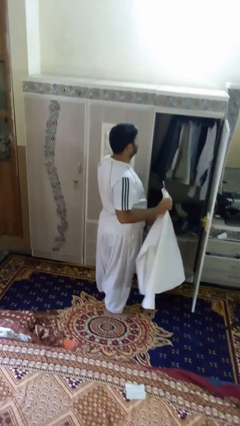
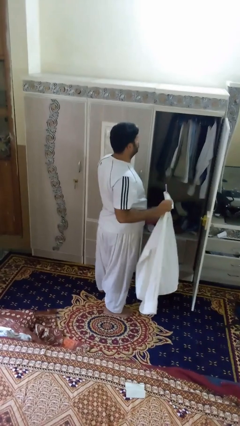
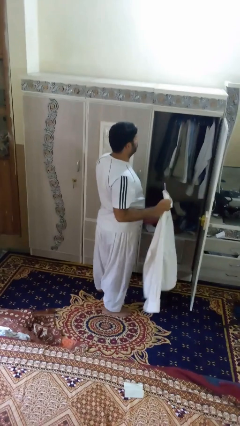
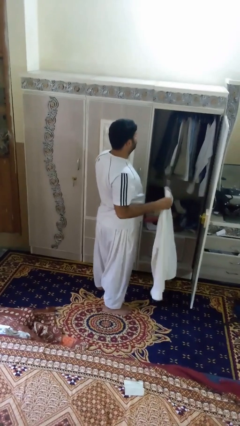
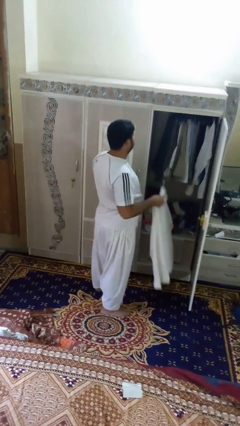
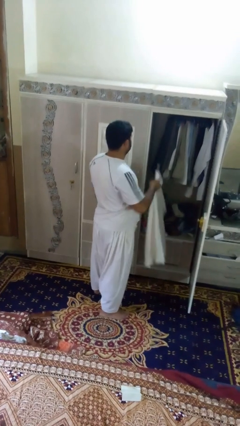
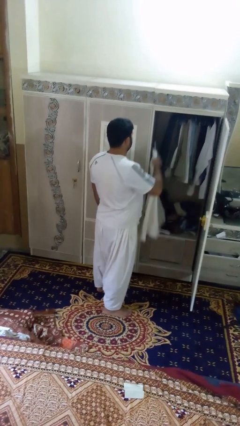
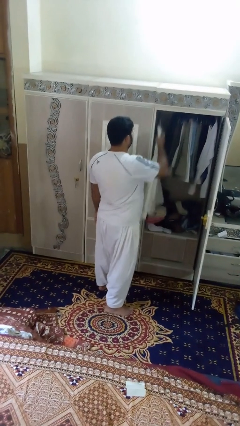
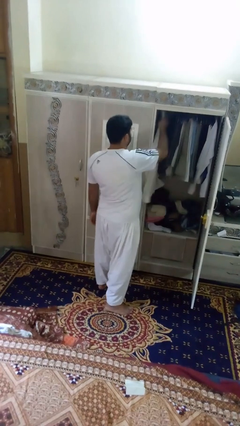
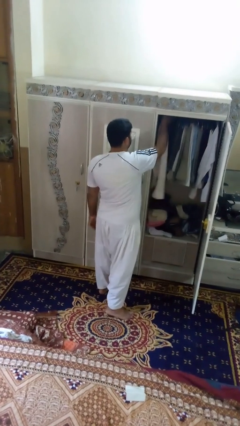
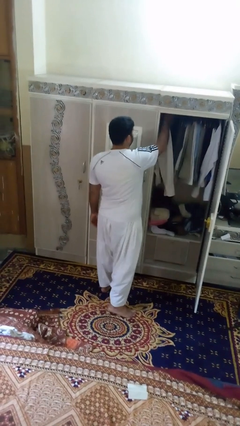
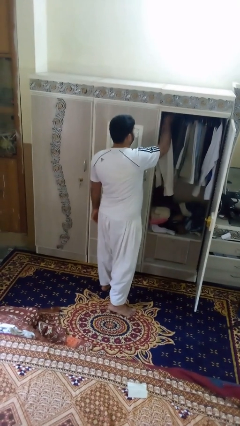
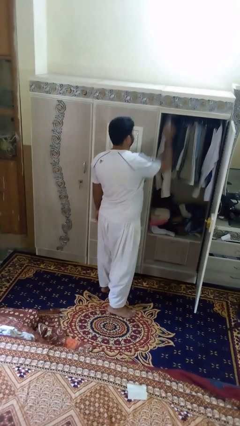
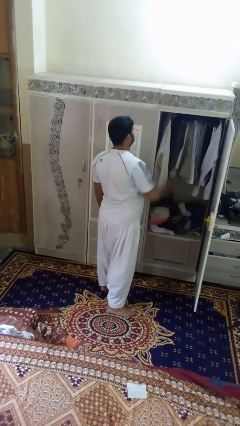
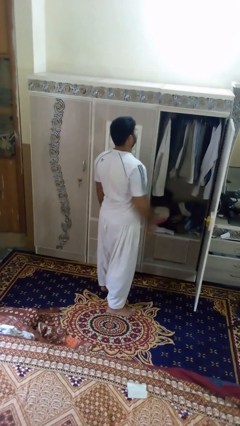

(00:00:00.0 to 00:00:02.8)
person puts clothes into closet

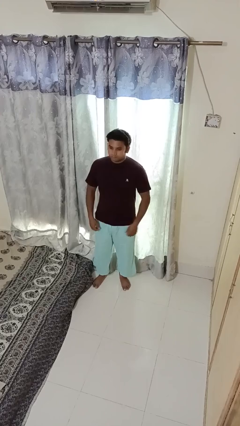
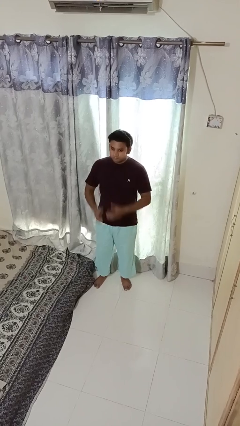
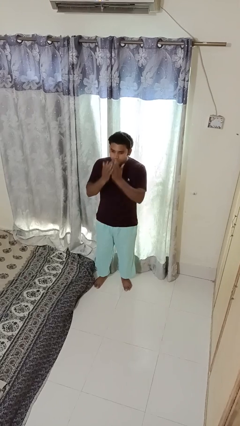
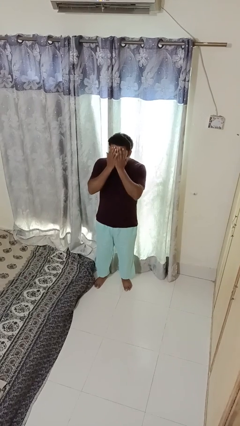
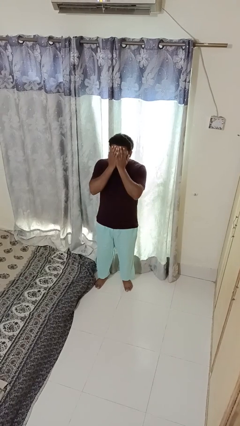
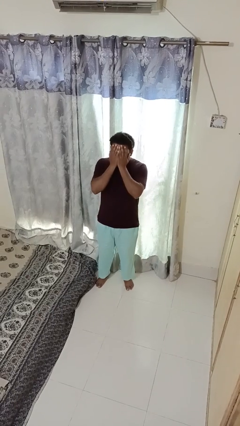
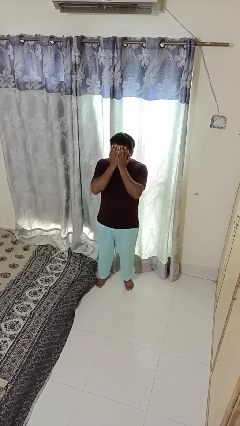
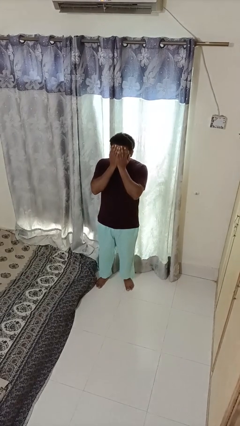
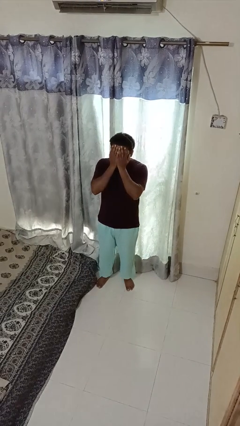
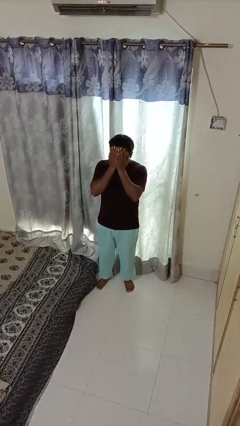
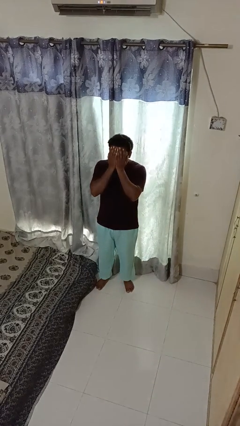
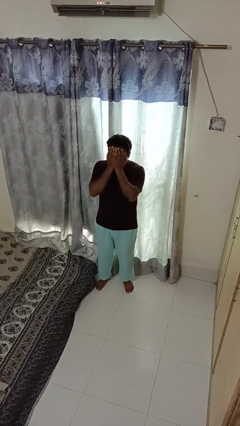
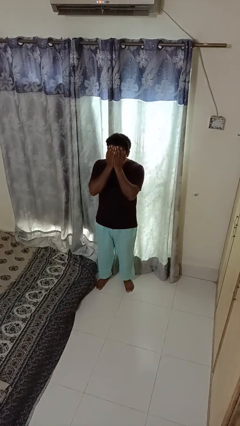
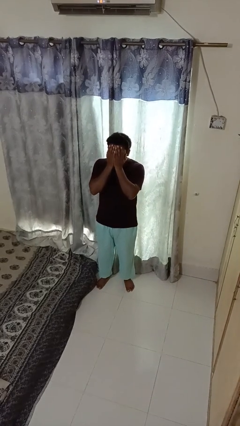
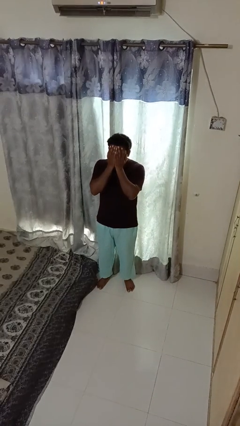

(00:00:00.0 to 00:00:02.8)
person covers face with hands

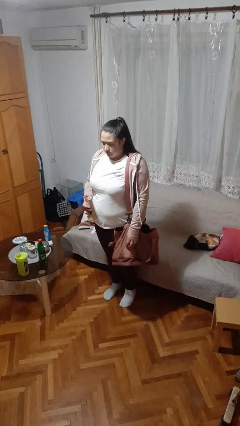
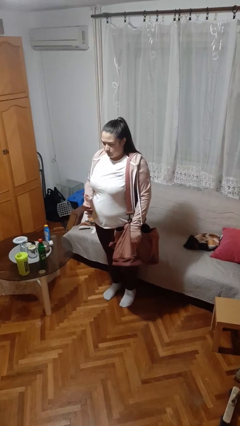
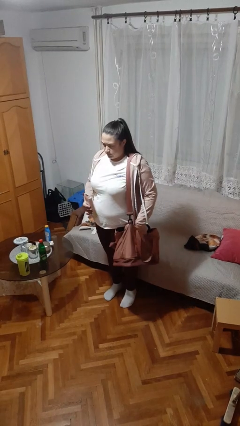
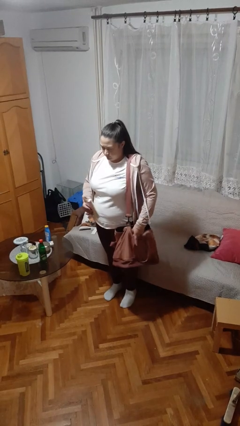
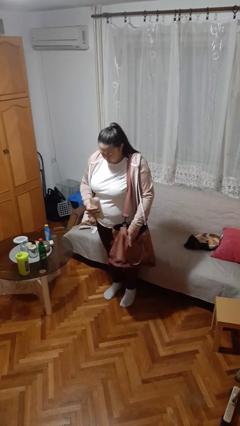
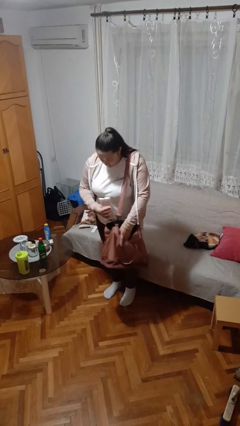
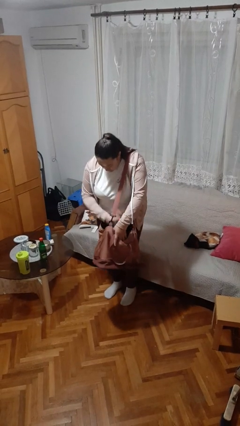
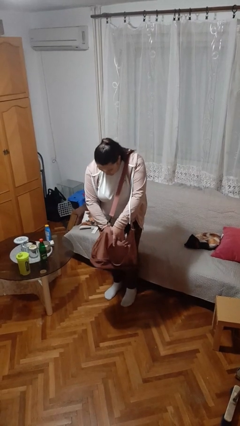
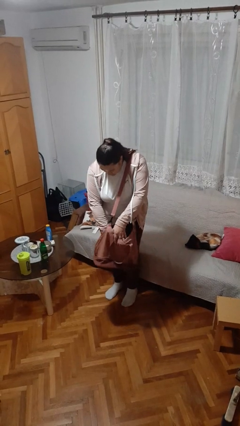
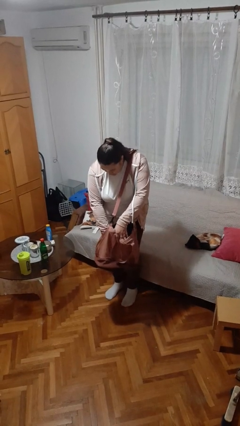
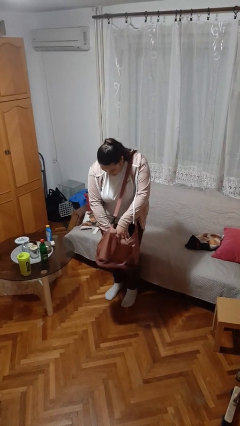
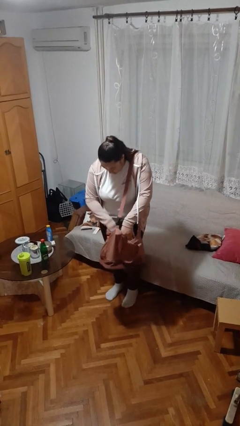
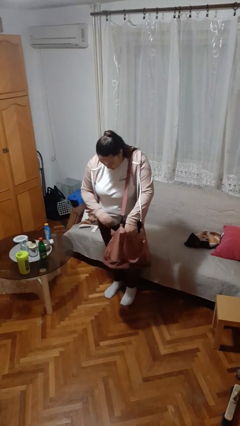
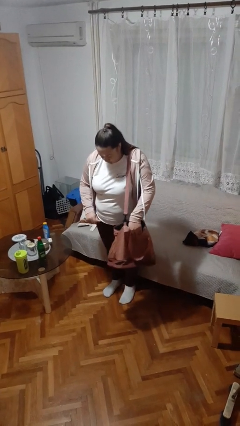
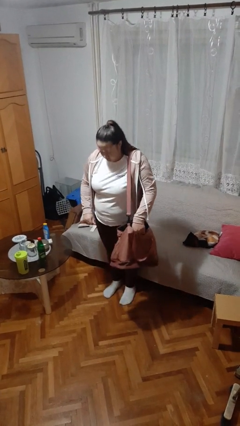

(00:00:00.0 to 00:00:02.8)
person puts object into purse

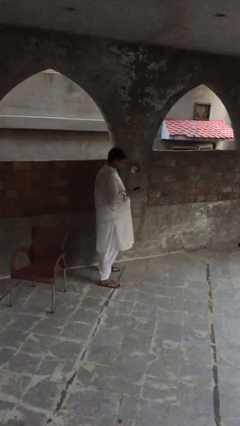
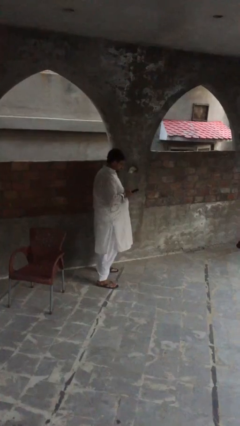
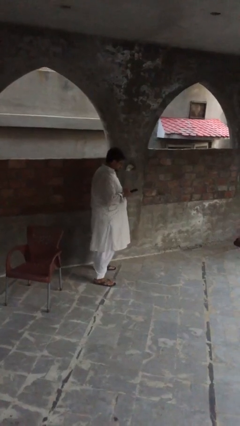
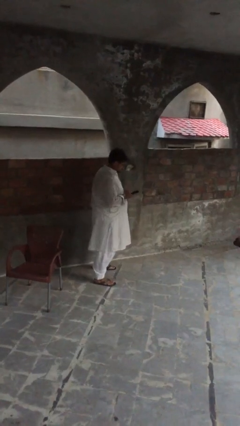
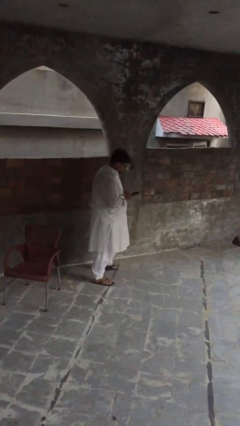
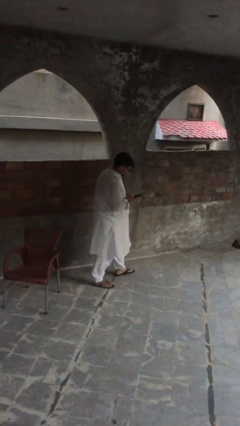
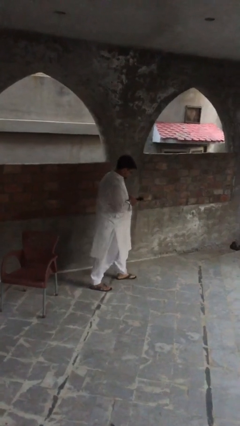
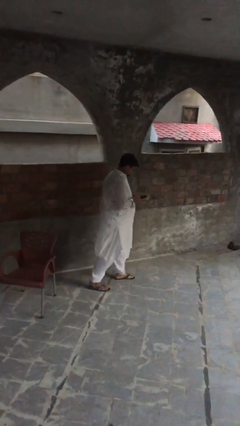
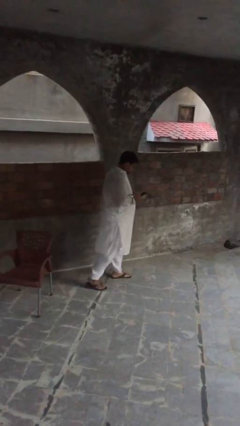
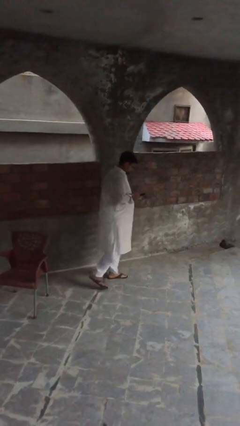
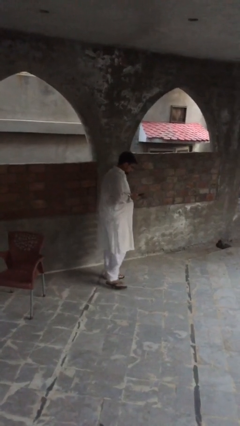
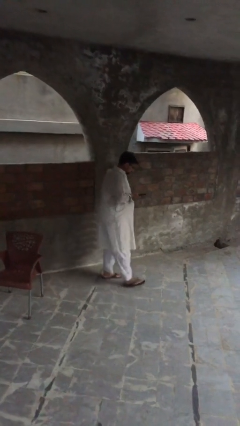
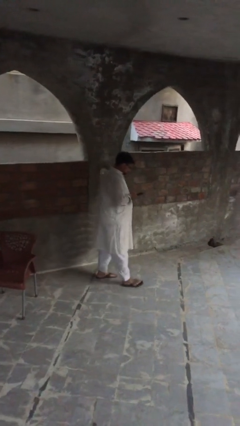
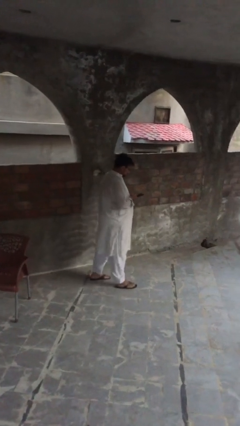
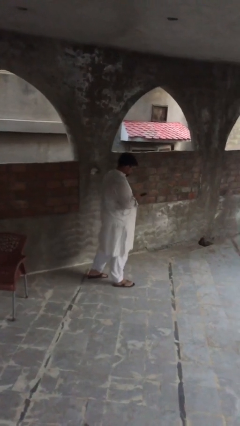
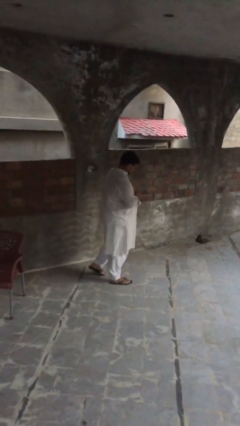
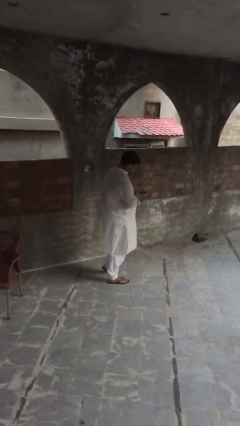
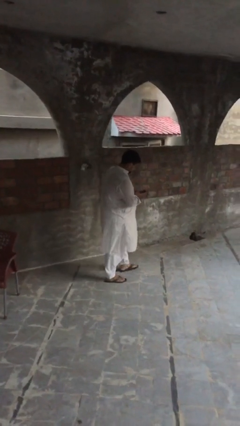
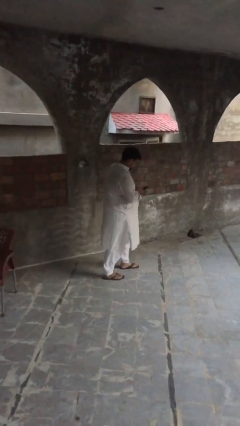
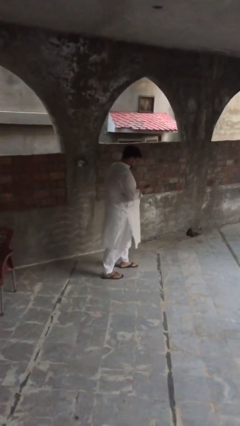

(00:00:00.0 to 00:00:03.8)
person texts on phone

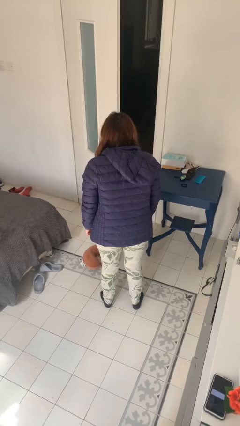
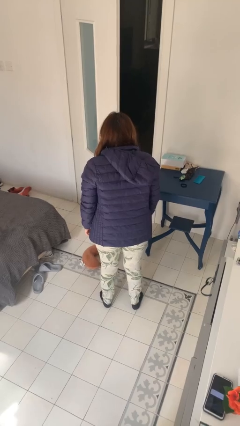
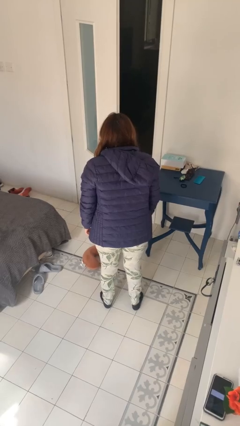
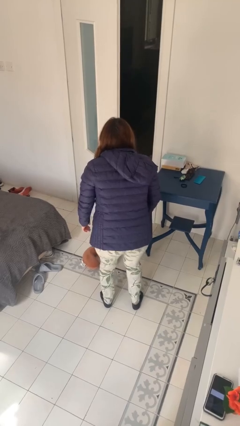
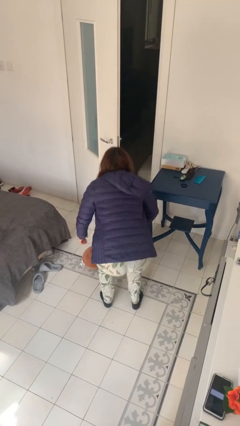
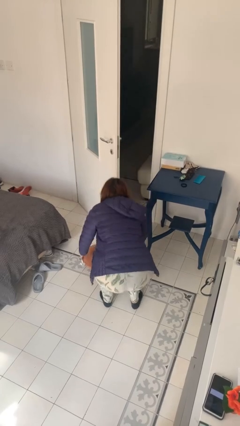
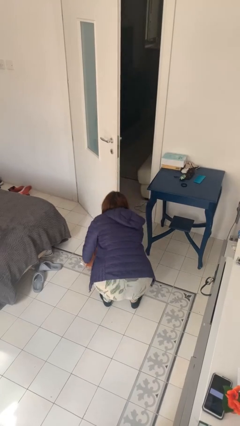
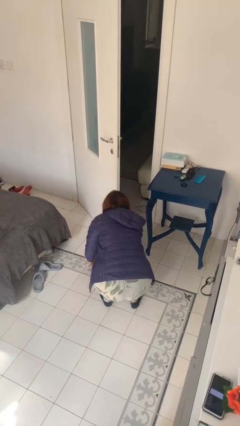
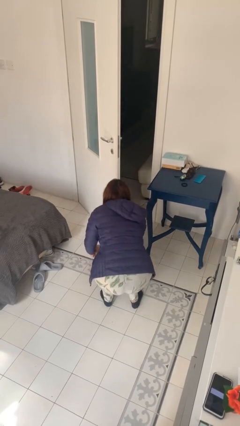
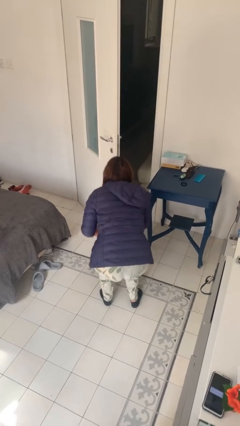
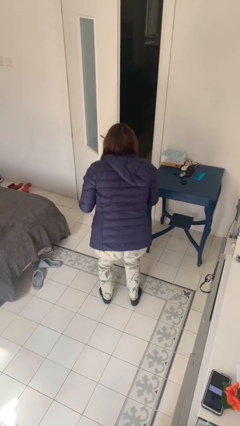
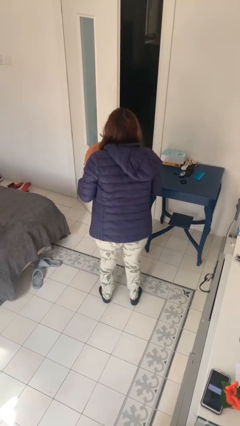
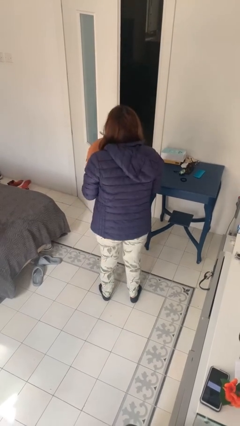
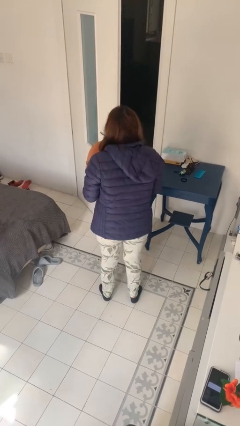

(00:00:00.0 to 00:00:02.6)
person picks up object from floor

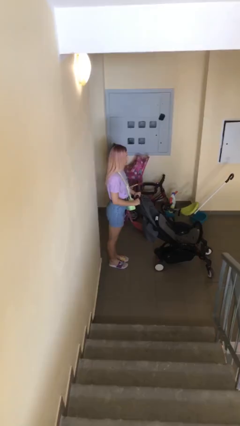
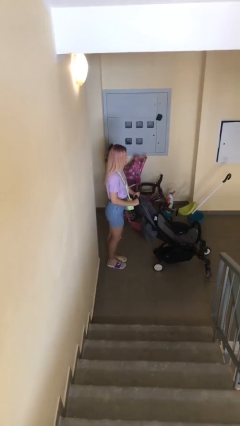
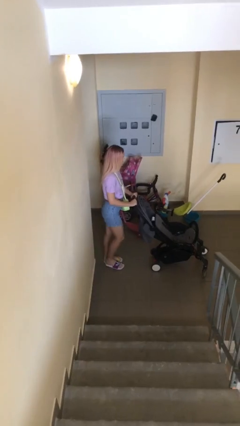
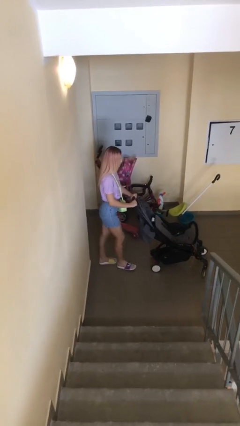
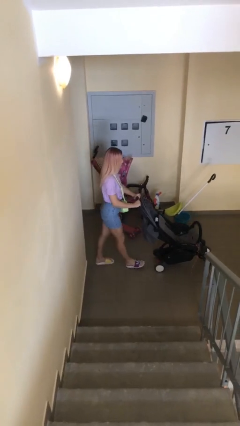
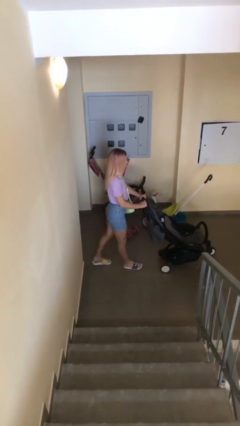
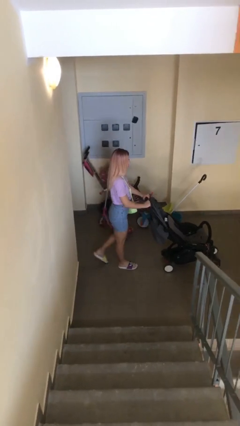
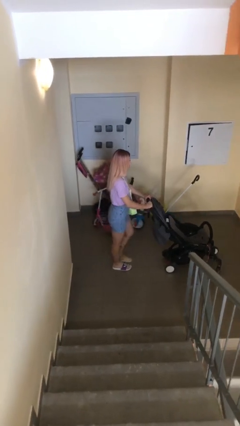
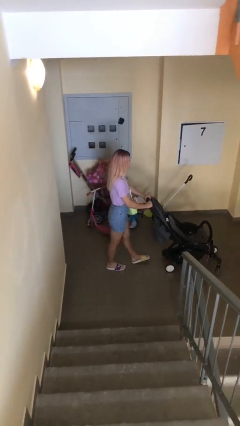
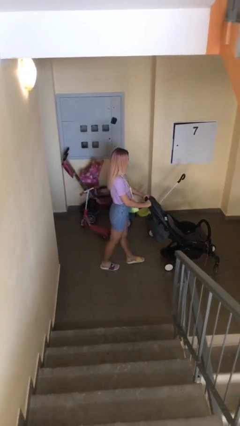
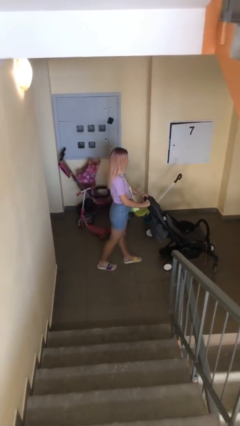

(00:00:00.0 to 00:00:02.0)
person pushes wheeled cart

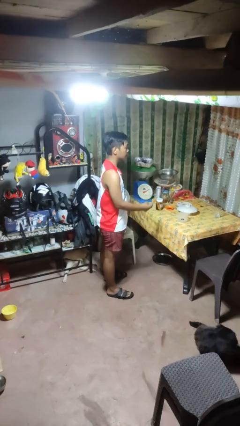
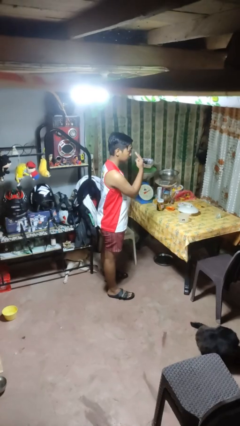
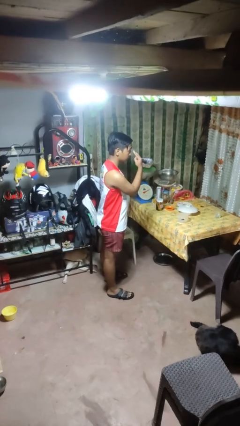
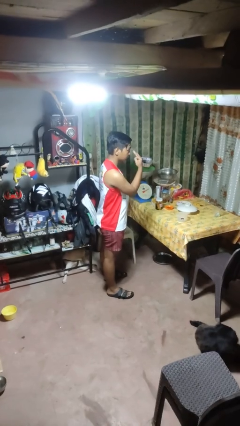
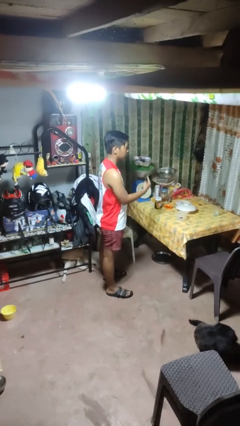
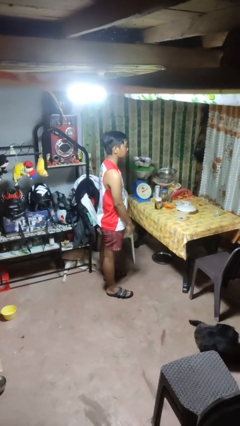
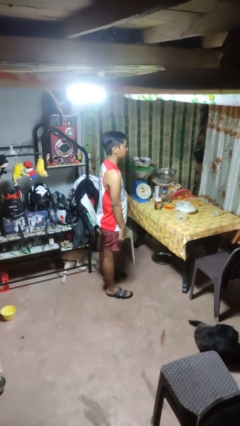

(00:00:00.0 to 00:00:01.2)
person gestures watch closely
